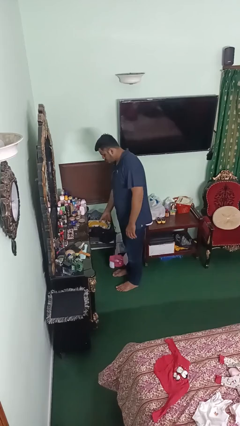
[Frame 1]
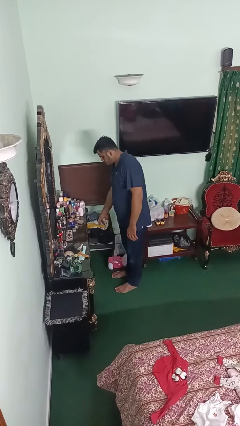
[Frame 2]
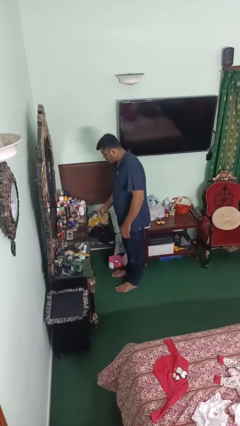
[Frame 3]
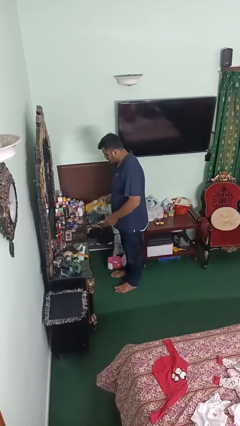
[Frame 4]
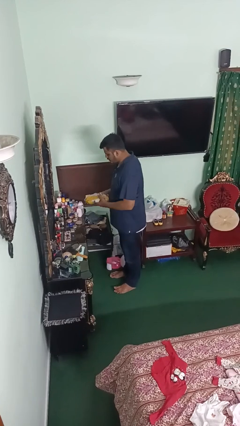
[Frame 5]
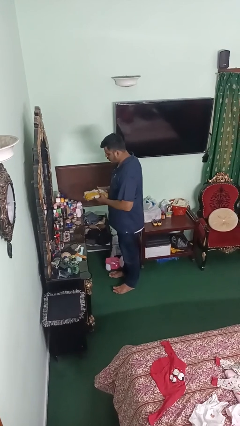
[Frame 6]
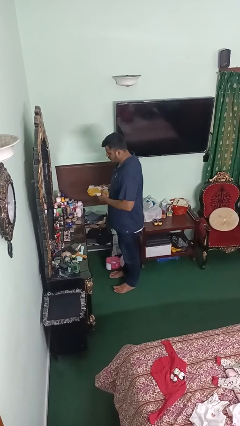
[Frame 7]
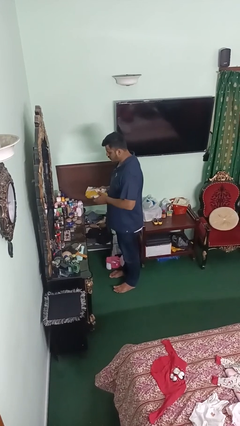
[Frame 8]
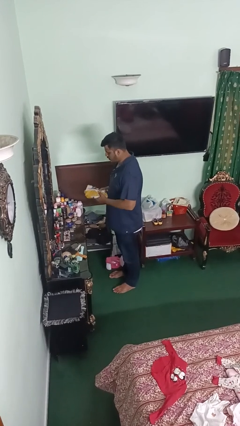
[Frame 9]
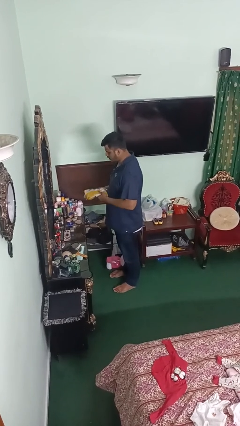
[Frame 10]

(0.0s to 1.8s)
person takes clothes from dresser

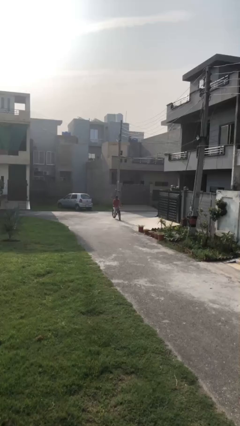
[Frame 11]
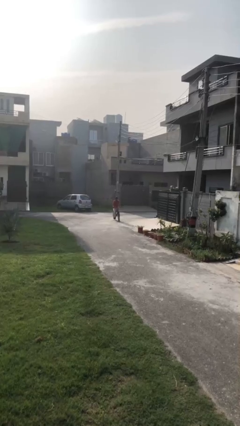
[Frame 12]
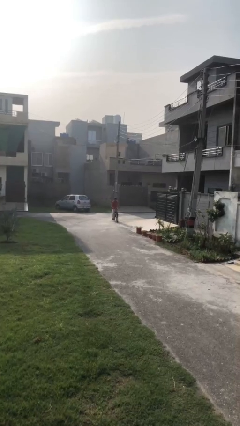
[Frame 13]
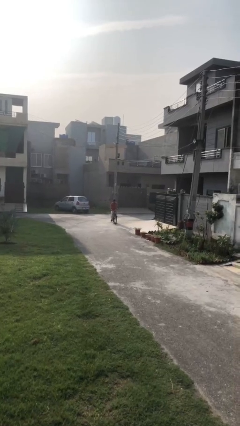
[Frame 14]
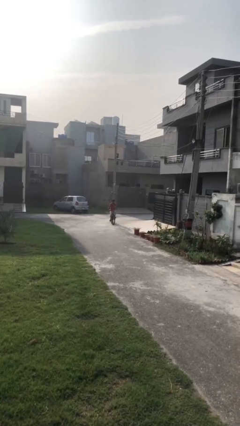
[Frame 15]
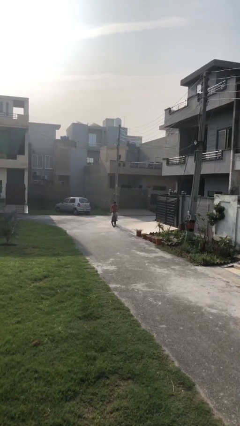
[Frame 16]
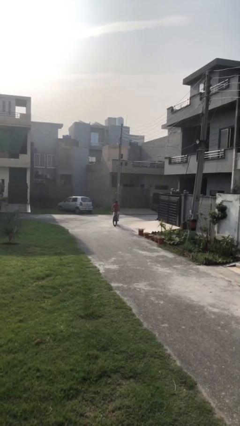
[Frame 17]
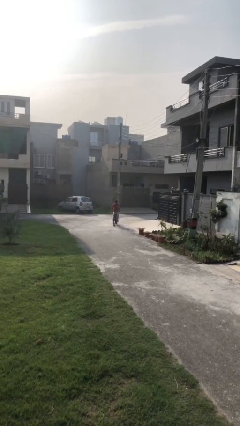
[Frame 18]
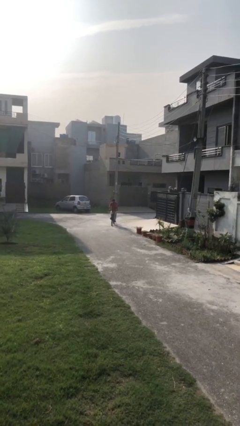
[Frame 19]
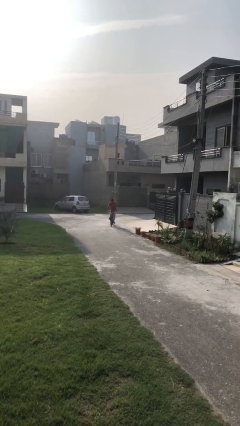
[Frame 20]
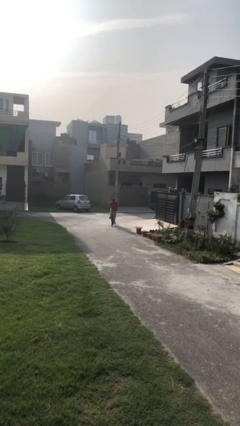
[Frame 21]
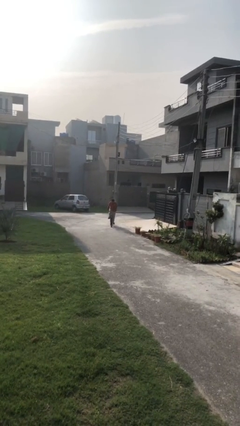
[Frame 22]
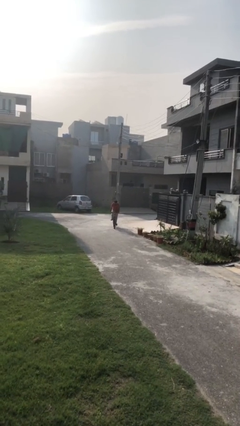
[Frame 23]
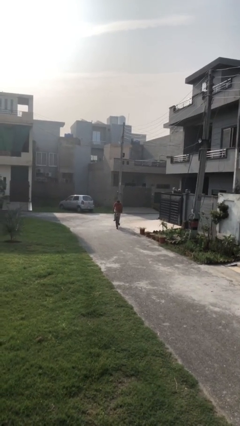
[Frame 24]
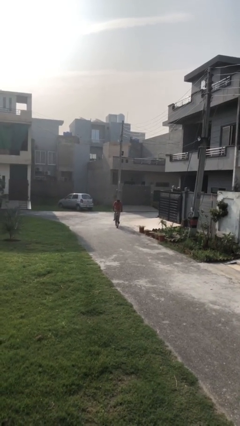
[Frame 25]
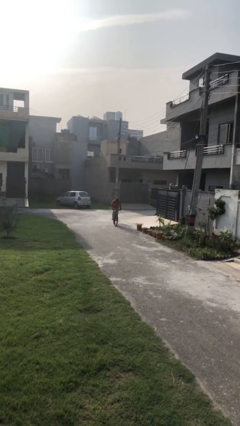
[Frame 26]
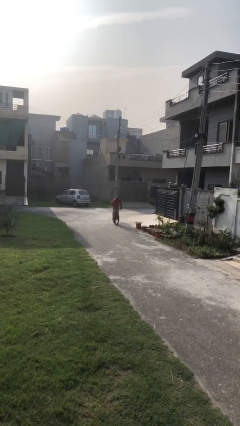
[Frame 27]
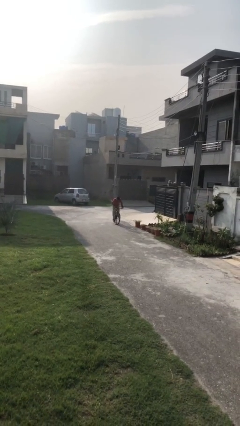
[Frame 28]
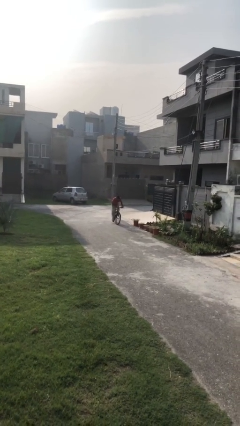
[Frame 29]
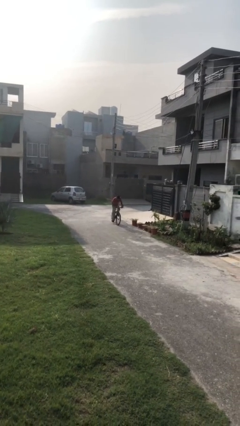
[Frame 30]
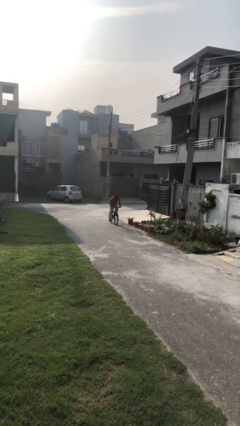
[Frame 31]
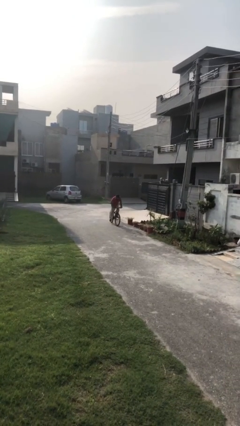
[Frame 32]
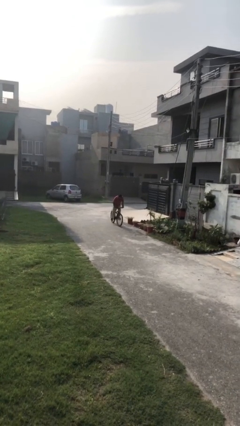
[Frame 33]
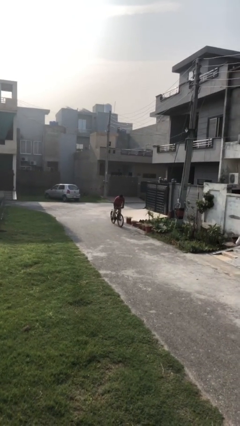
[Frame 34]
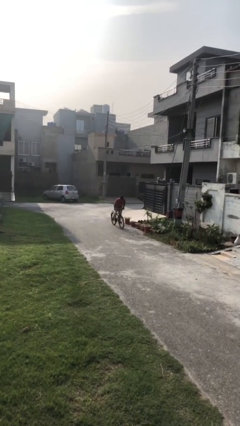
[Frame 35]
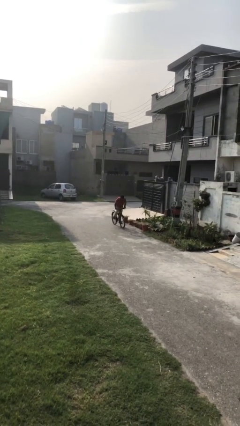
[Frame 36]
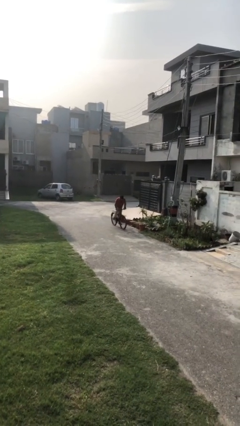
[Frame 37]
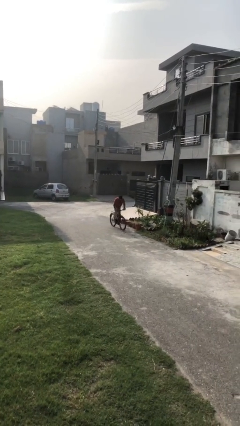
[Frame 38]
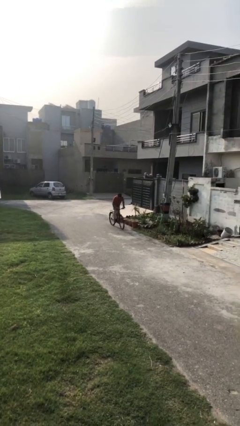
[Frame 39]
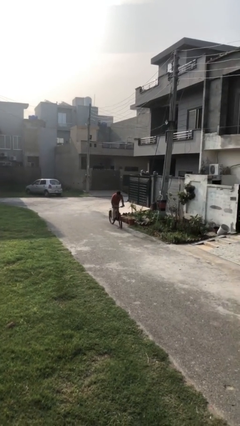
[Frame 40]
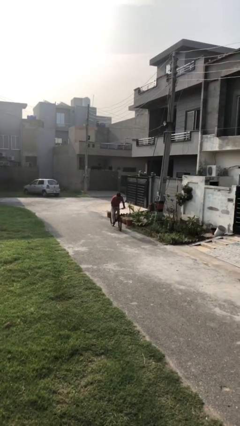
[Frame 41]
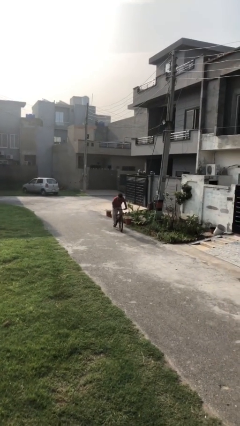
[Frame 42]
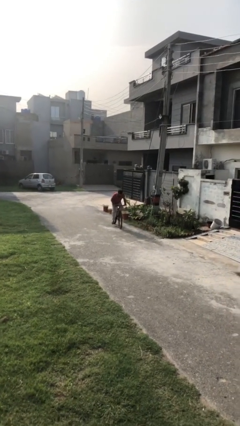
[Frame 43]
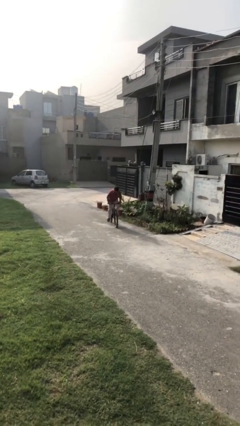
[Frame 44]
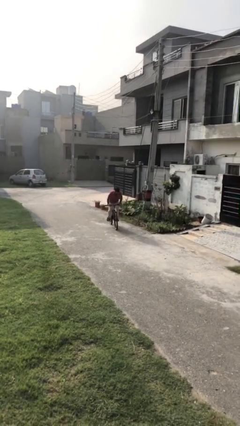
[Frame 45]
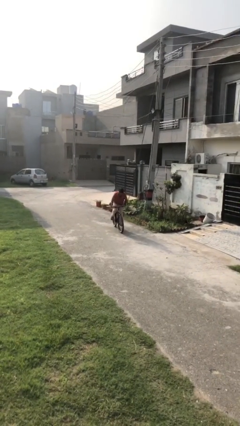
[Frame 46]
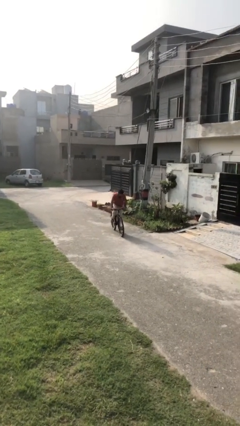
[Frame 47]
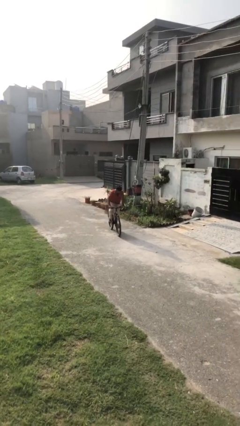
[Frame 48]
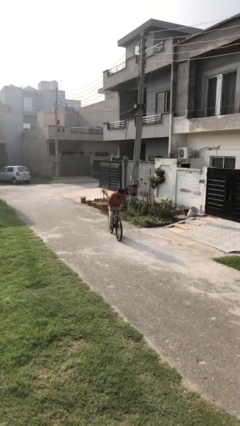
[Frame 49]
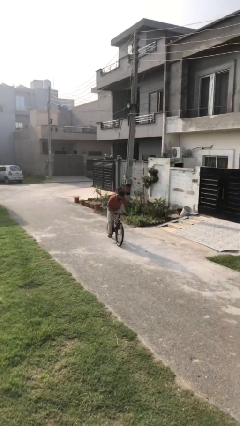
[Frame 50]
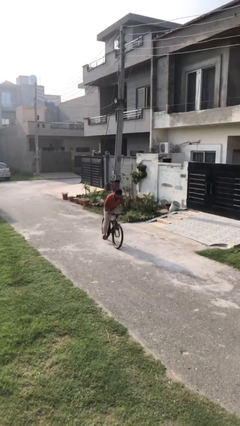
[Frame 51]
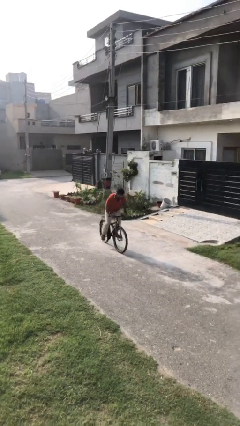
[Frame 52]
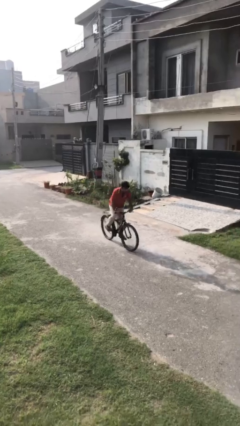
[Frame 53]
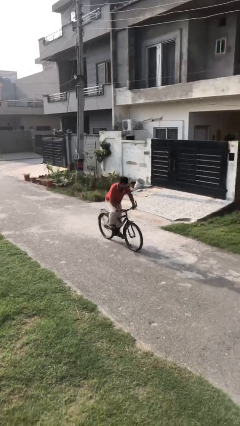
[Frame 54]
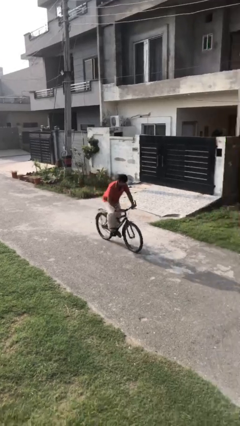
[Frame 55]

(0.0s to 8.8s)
person rides bicycle

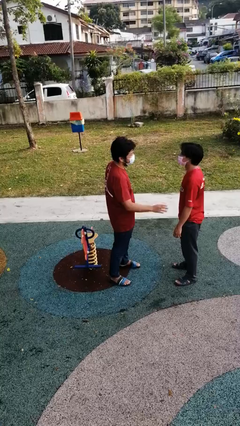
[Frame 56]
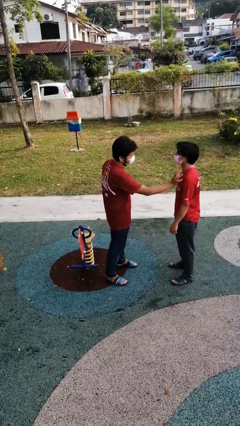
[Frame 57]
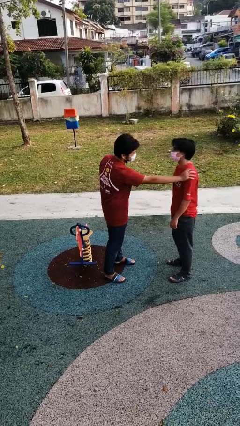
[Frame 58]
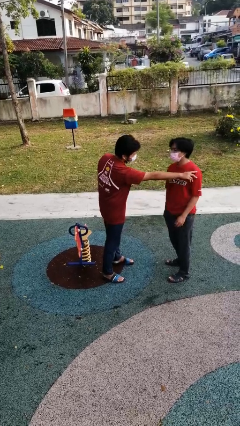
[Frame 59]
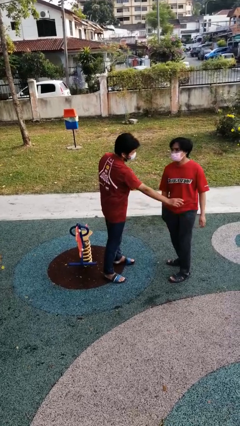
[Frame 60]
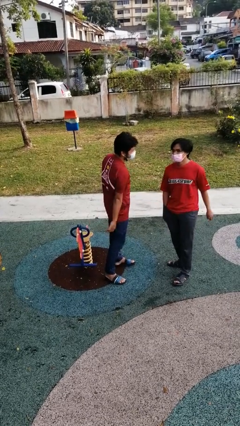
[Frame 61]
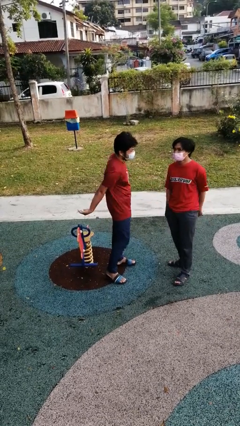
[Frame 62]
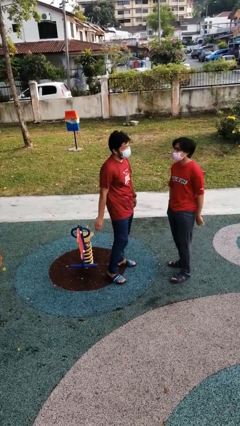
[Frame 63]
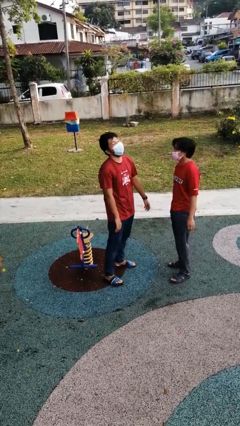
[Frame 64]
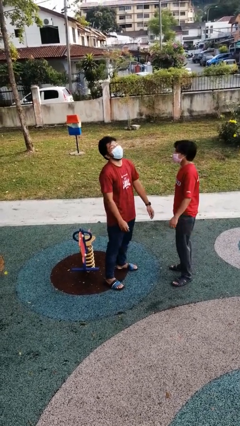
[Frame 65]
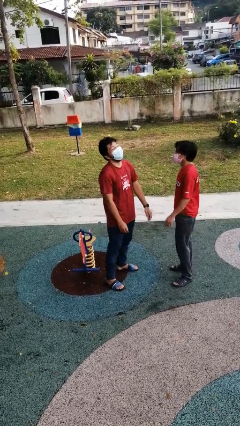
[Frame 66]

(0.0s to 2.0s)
person shoves person

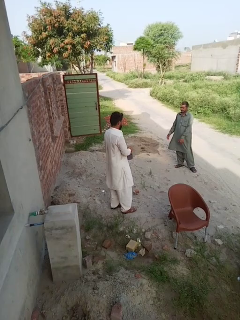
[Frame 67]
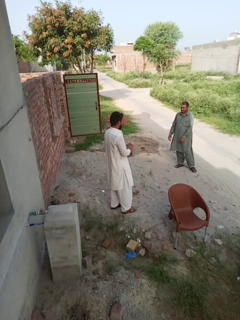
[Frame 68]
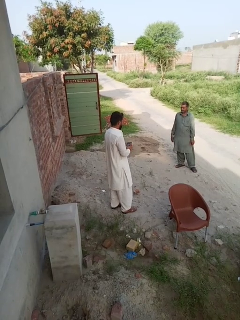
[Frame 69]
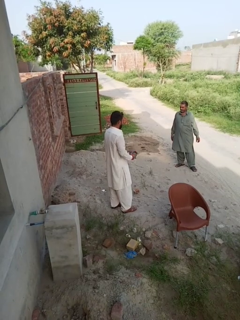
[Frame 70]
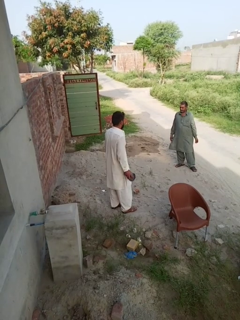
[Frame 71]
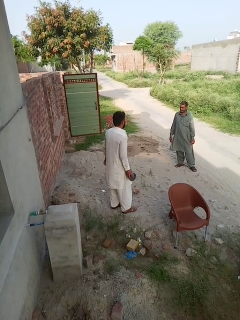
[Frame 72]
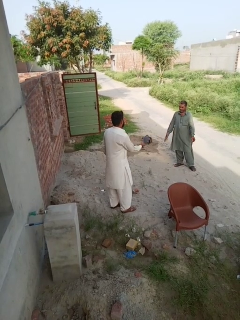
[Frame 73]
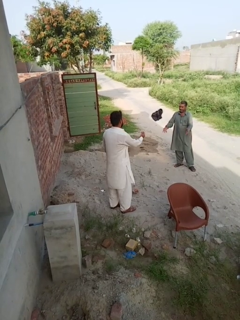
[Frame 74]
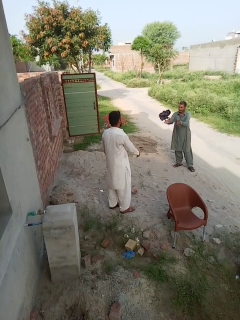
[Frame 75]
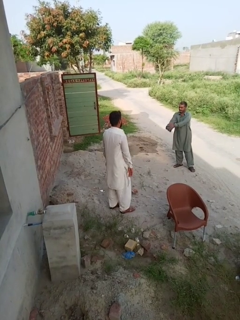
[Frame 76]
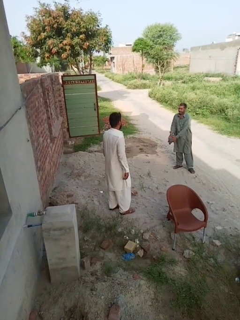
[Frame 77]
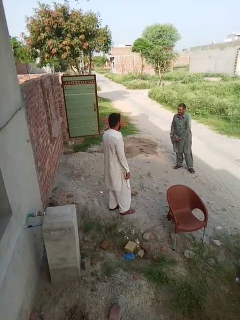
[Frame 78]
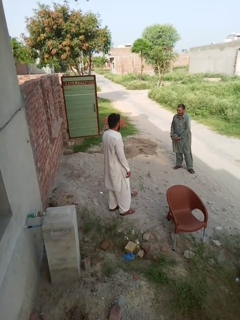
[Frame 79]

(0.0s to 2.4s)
person throws object to person

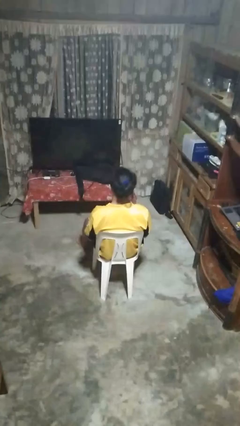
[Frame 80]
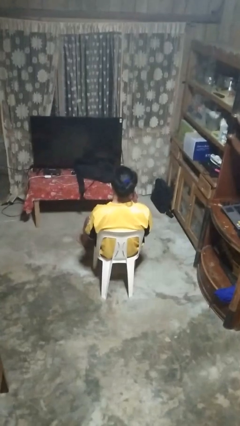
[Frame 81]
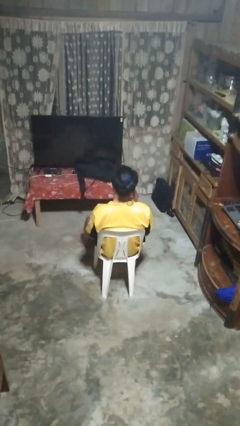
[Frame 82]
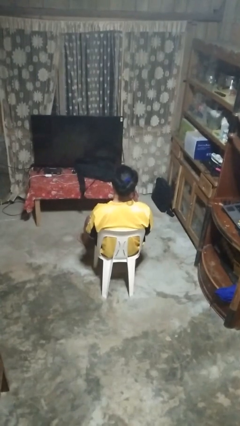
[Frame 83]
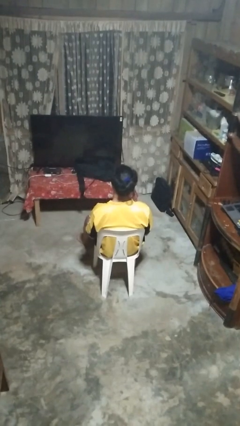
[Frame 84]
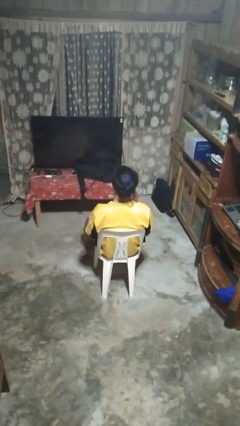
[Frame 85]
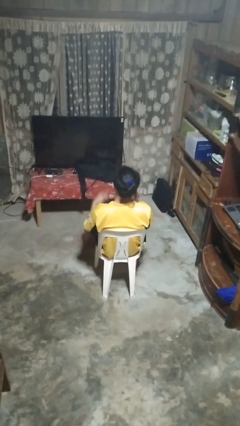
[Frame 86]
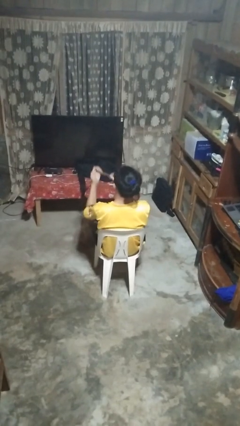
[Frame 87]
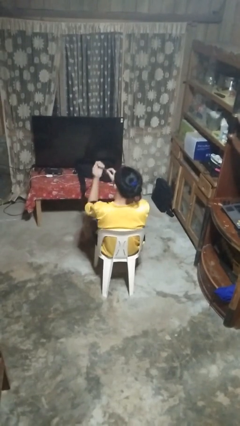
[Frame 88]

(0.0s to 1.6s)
person files fingernails

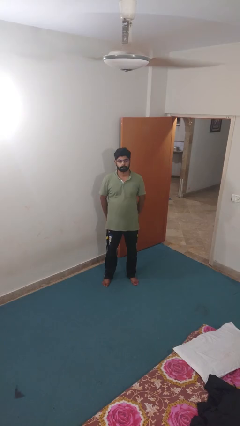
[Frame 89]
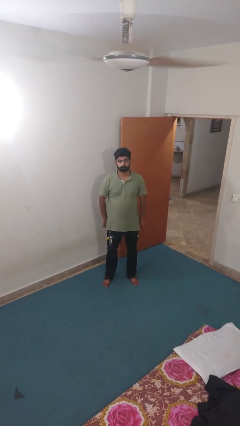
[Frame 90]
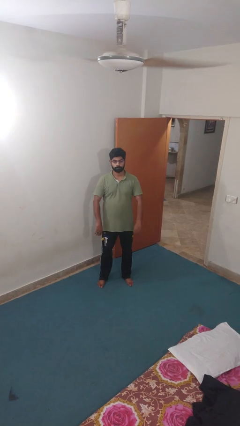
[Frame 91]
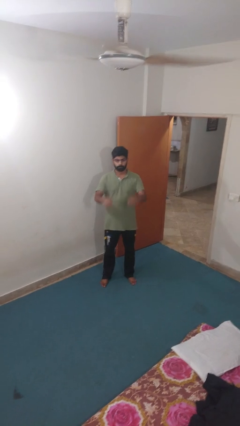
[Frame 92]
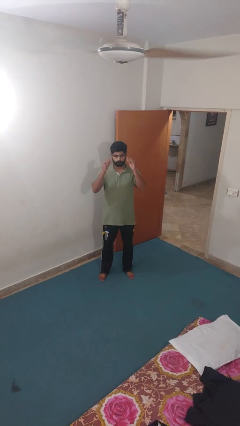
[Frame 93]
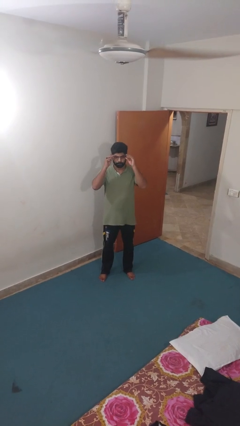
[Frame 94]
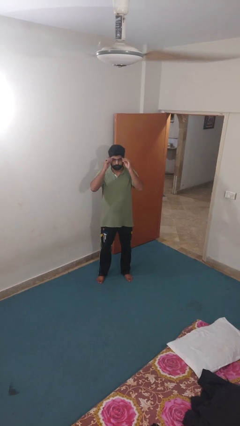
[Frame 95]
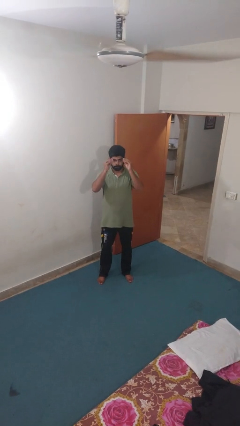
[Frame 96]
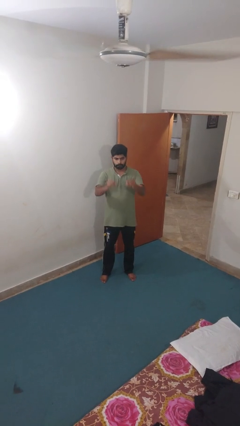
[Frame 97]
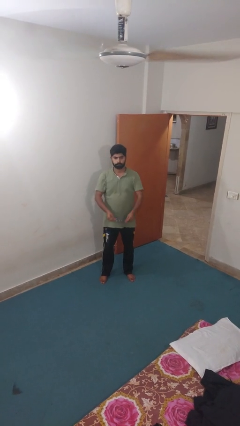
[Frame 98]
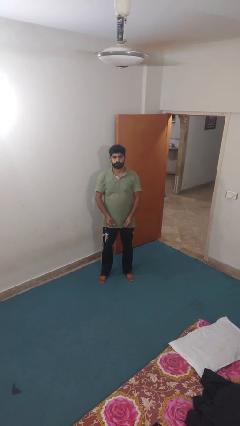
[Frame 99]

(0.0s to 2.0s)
person takes off glasses
